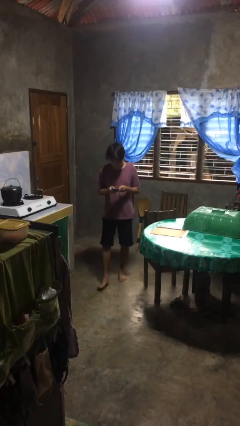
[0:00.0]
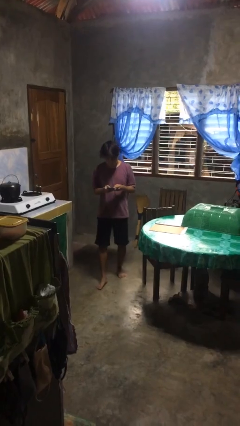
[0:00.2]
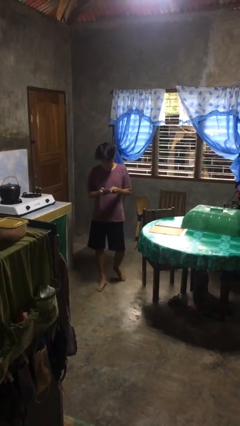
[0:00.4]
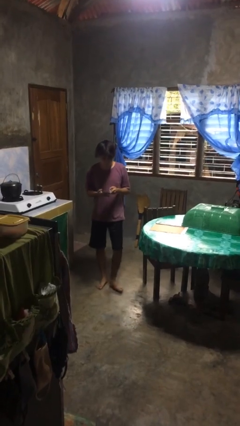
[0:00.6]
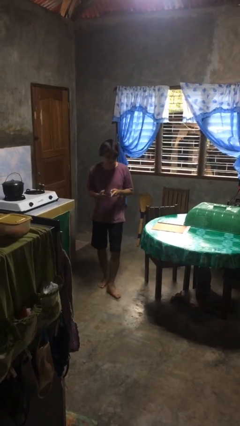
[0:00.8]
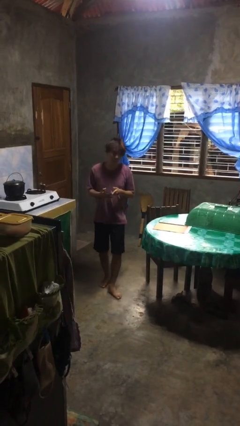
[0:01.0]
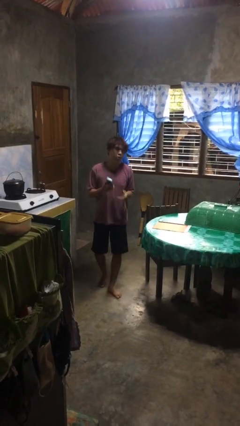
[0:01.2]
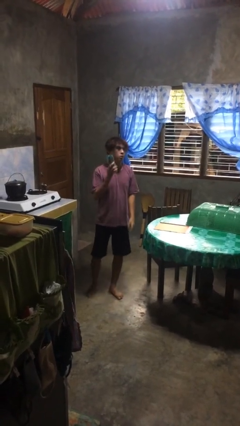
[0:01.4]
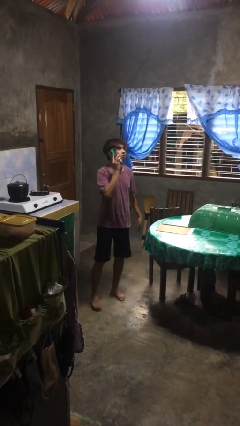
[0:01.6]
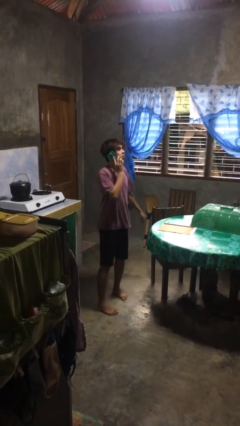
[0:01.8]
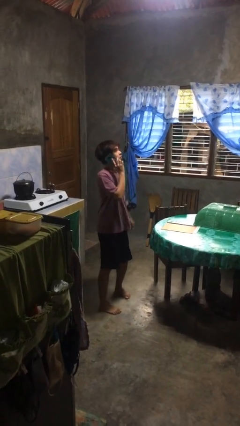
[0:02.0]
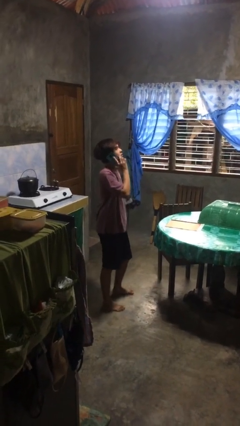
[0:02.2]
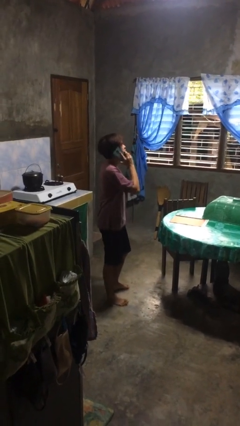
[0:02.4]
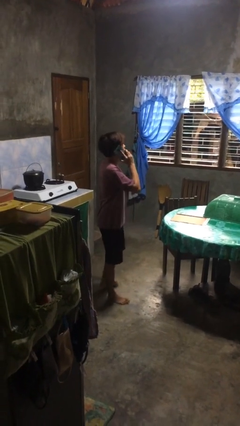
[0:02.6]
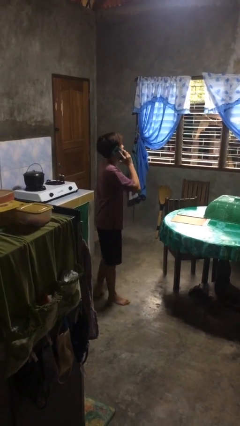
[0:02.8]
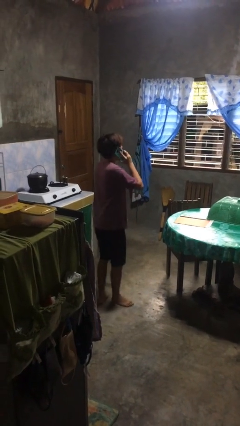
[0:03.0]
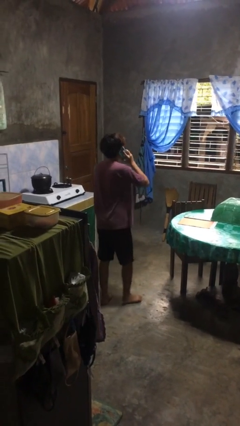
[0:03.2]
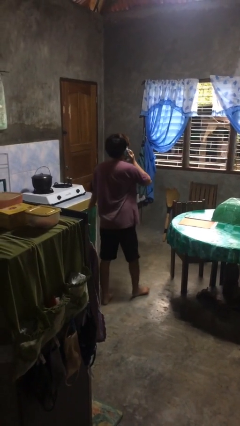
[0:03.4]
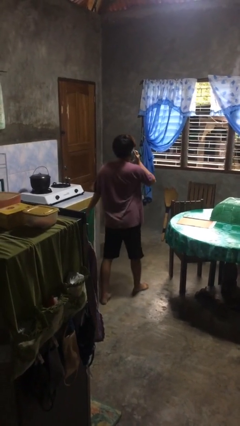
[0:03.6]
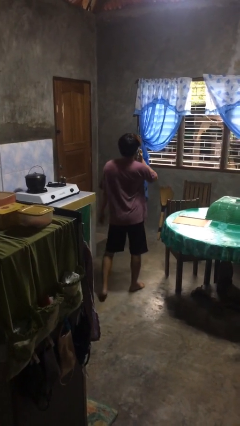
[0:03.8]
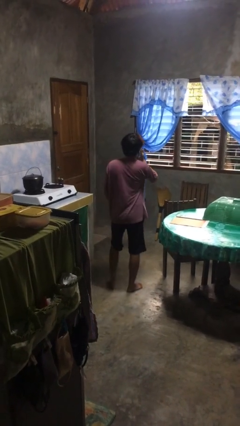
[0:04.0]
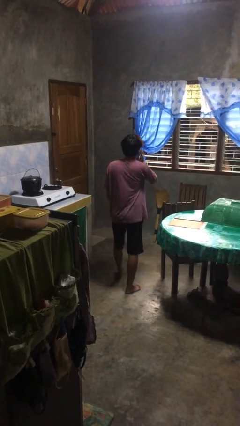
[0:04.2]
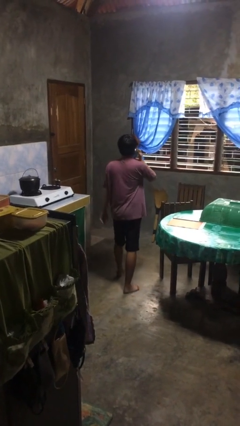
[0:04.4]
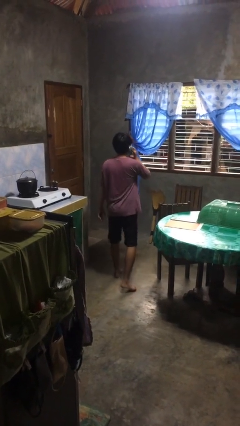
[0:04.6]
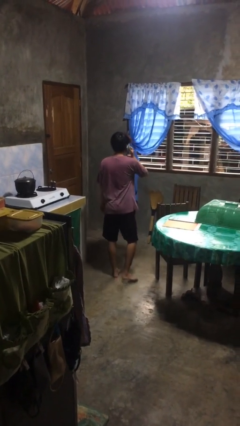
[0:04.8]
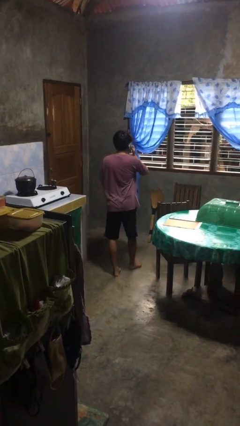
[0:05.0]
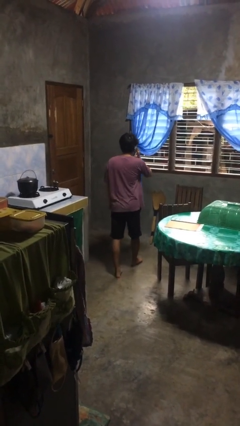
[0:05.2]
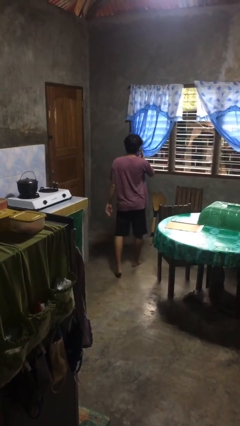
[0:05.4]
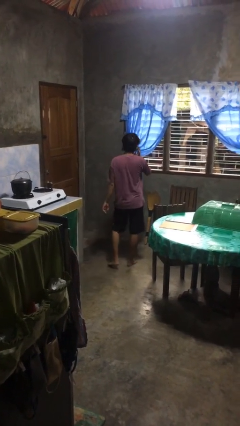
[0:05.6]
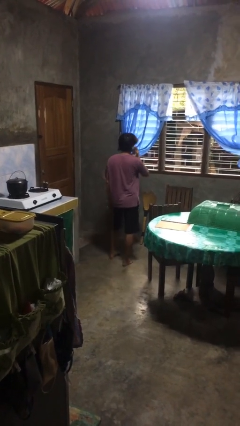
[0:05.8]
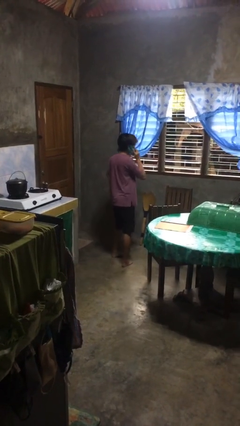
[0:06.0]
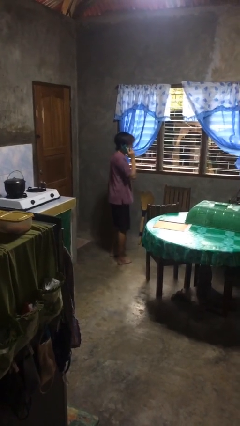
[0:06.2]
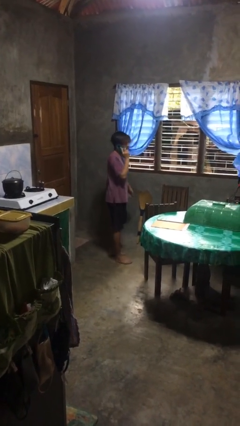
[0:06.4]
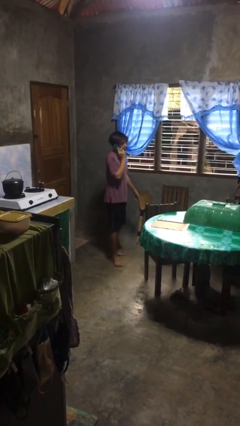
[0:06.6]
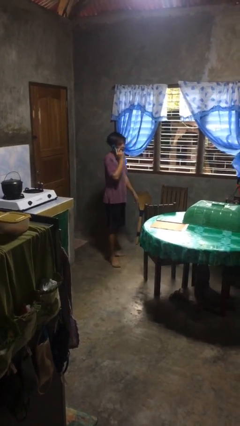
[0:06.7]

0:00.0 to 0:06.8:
person talks on phone

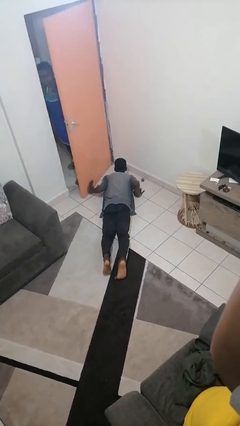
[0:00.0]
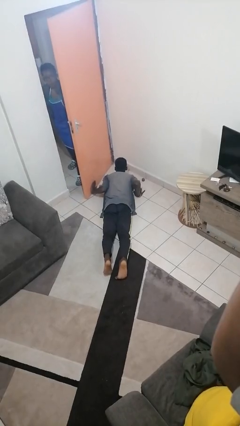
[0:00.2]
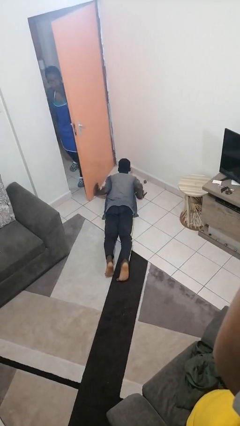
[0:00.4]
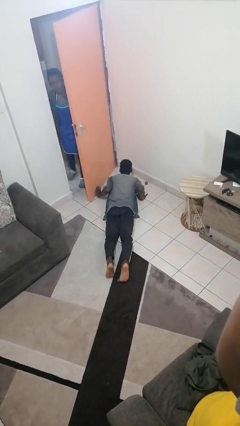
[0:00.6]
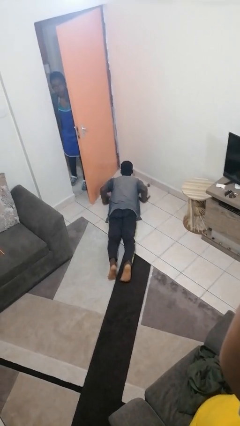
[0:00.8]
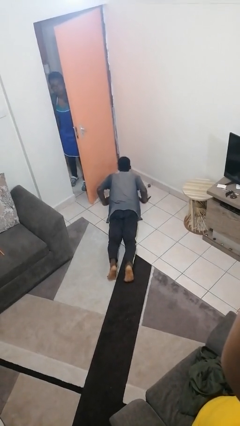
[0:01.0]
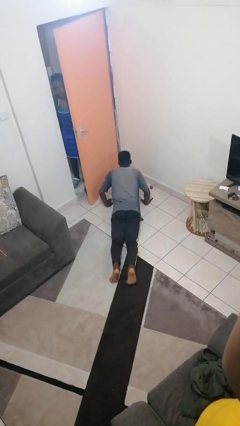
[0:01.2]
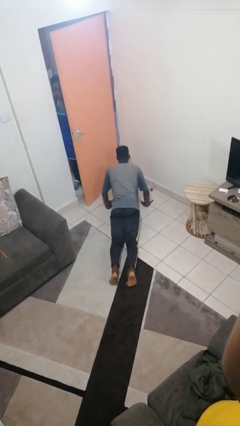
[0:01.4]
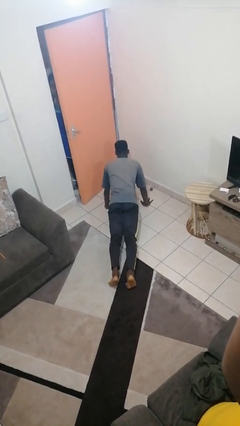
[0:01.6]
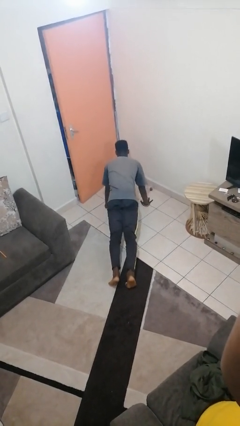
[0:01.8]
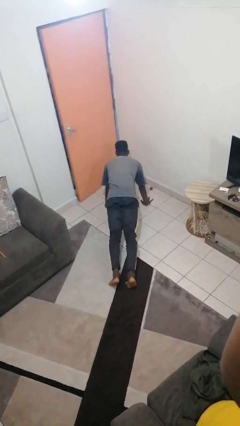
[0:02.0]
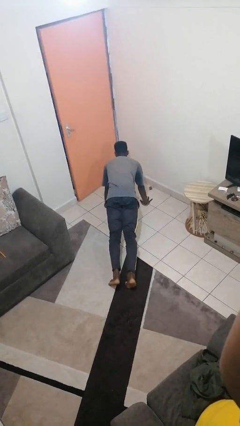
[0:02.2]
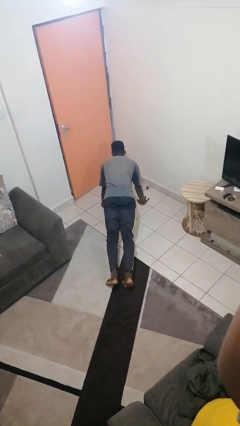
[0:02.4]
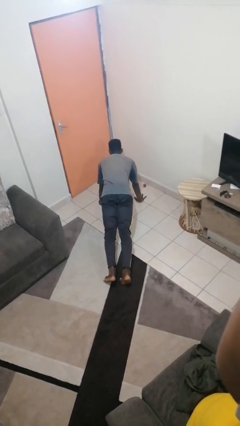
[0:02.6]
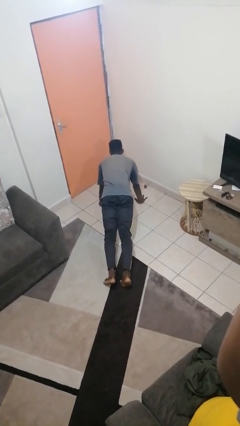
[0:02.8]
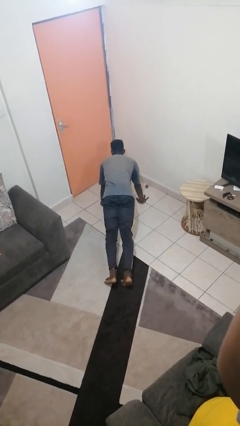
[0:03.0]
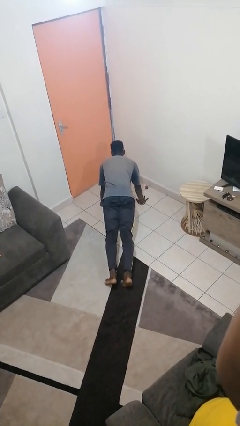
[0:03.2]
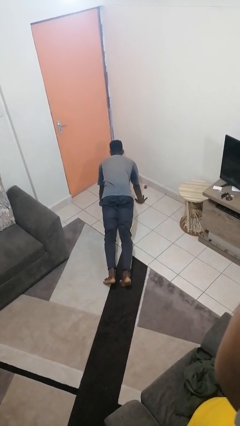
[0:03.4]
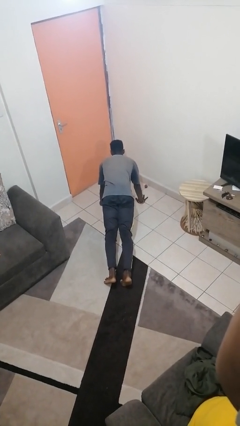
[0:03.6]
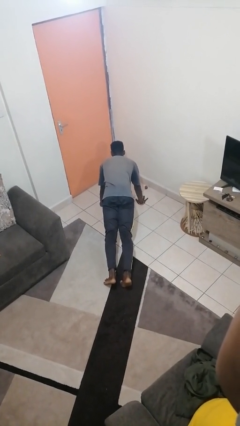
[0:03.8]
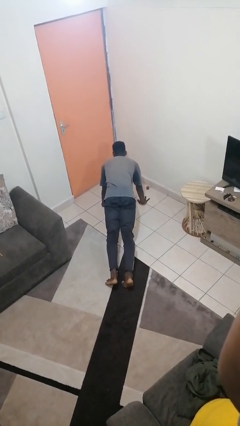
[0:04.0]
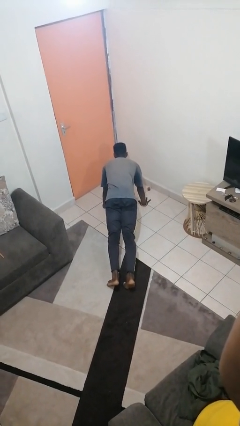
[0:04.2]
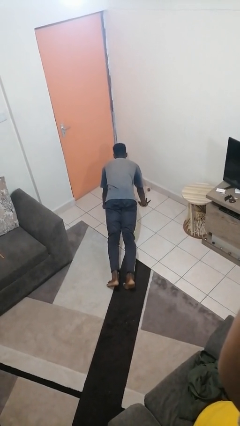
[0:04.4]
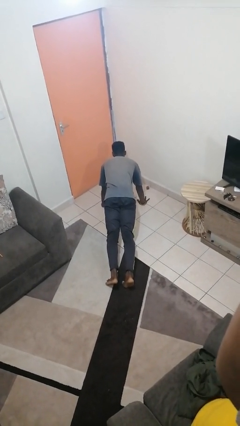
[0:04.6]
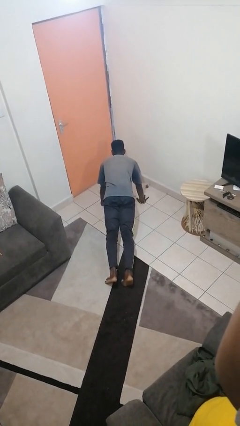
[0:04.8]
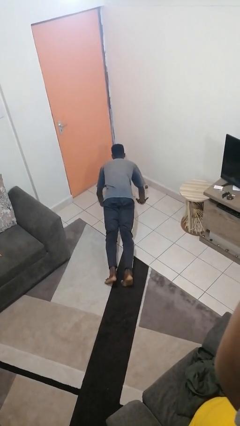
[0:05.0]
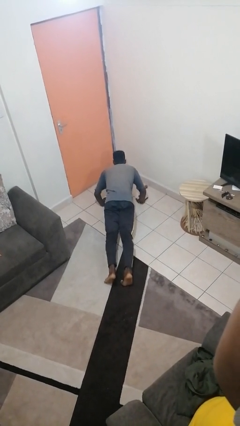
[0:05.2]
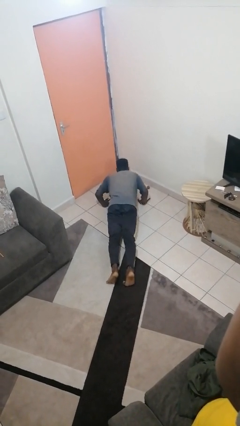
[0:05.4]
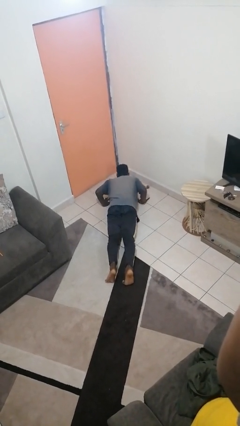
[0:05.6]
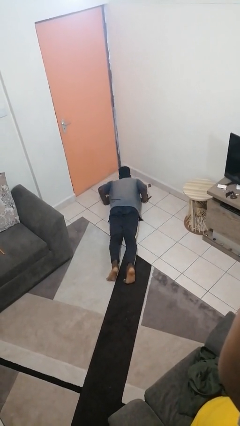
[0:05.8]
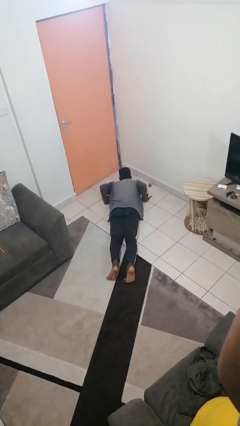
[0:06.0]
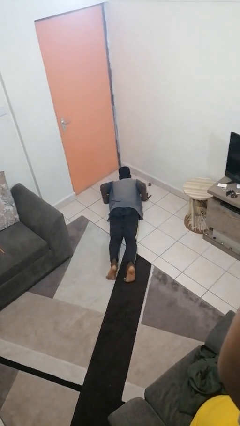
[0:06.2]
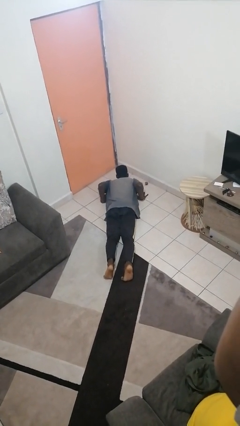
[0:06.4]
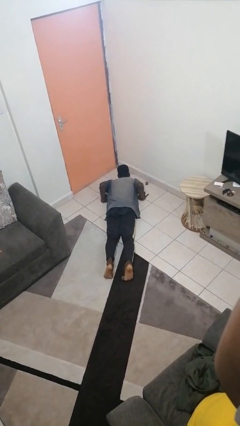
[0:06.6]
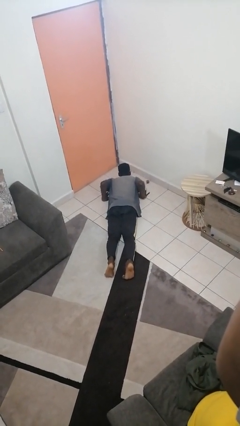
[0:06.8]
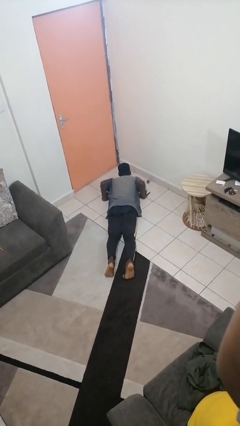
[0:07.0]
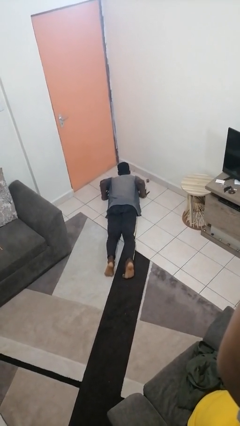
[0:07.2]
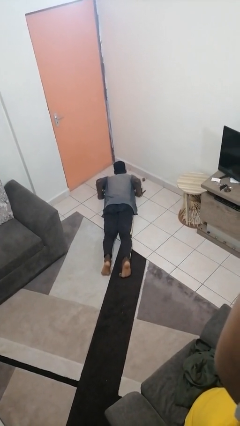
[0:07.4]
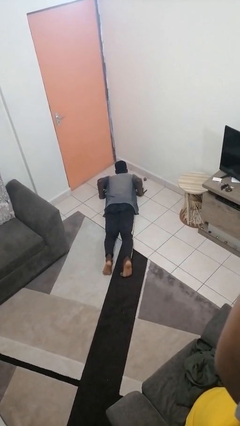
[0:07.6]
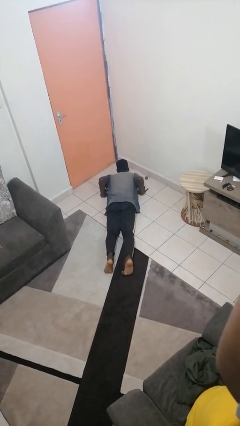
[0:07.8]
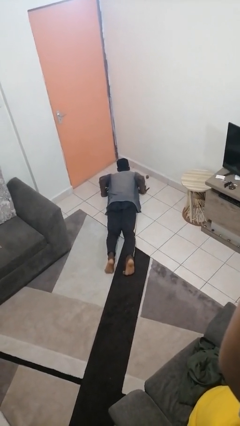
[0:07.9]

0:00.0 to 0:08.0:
person exercises with pushup

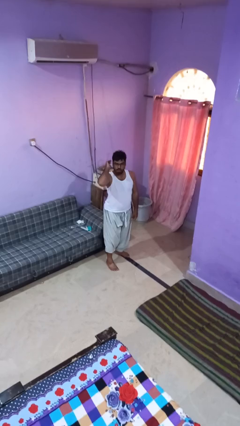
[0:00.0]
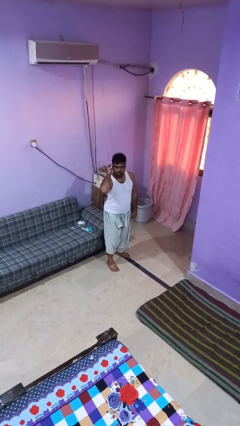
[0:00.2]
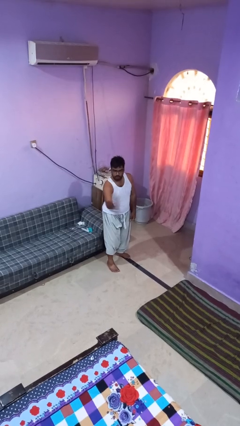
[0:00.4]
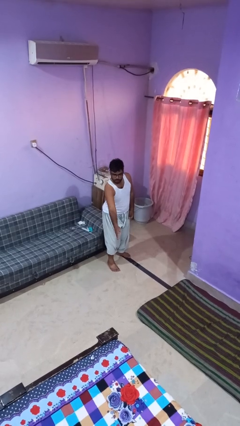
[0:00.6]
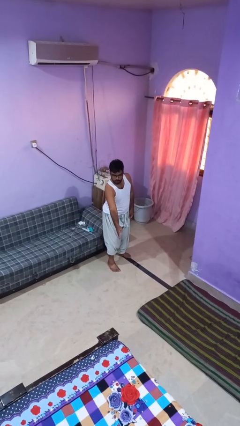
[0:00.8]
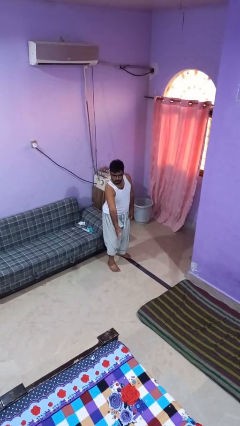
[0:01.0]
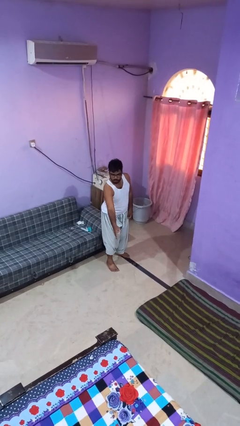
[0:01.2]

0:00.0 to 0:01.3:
person karate chop

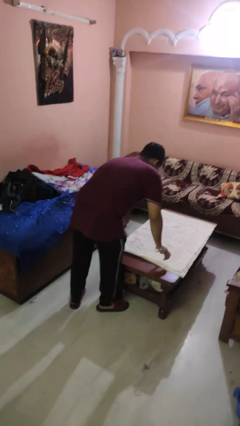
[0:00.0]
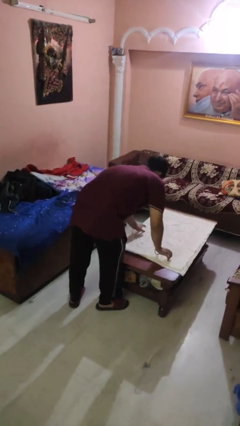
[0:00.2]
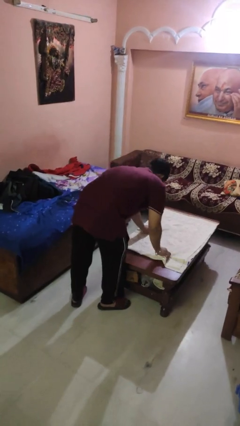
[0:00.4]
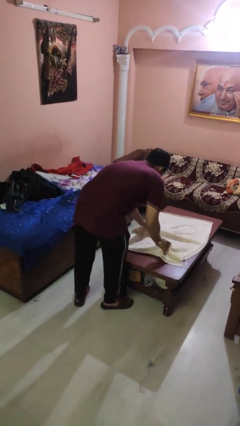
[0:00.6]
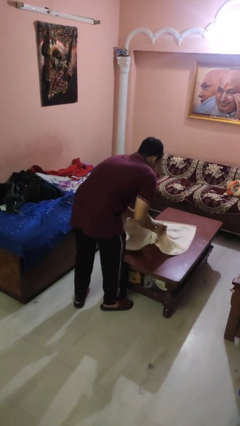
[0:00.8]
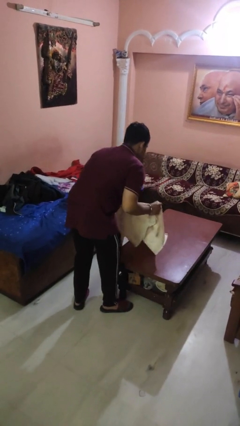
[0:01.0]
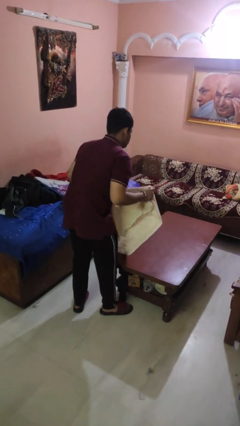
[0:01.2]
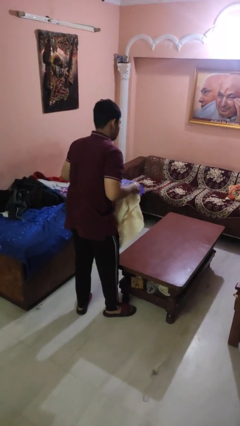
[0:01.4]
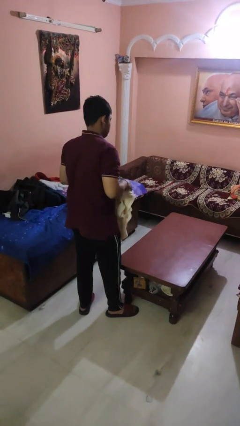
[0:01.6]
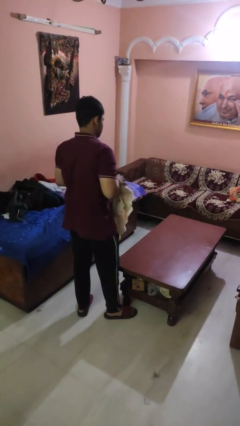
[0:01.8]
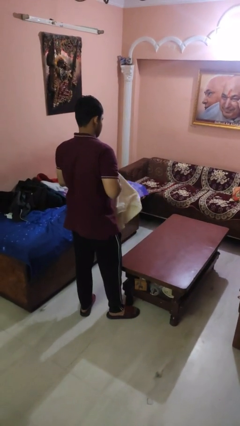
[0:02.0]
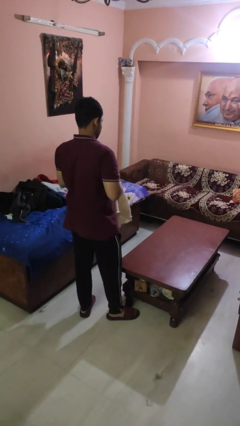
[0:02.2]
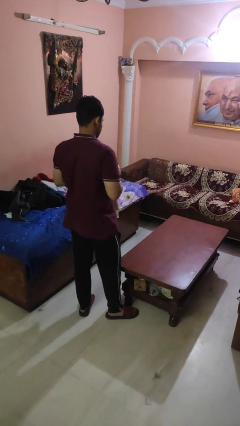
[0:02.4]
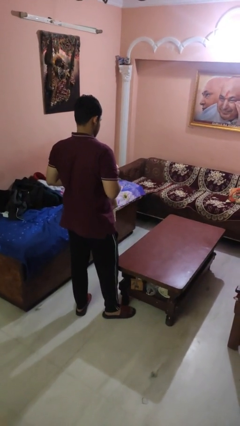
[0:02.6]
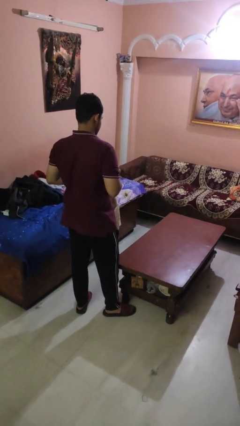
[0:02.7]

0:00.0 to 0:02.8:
person folds tablecloth
